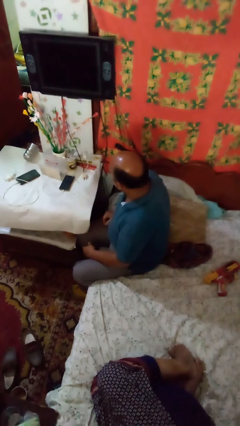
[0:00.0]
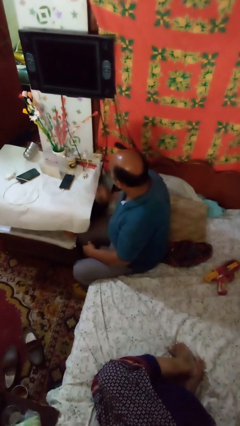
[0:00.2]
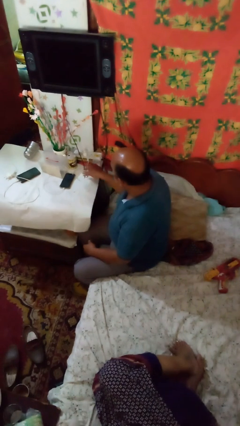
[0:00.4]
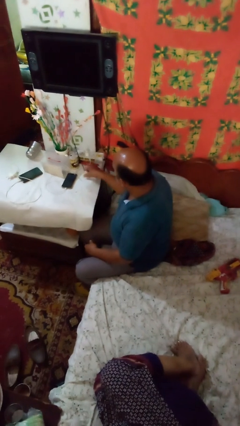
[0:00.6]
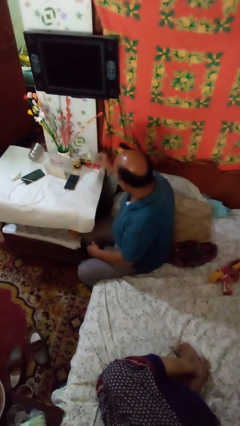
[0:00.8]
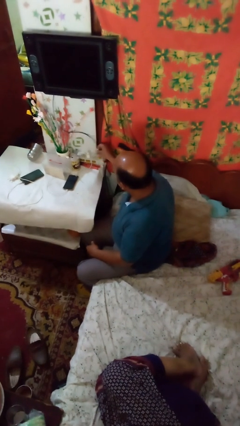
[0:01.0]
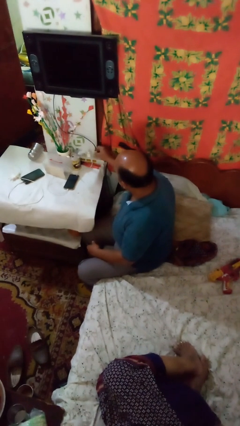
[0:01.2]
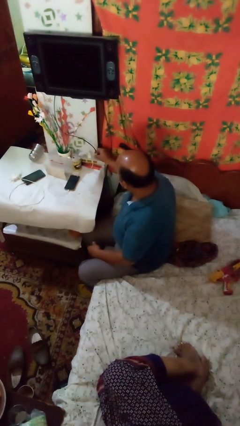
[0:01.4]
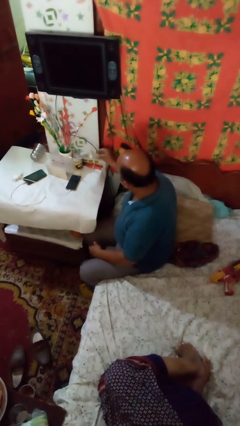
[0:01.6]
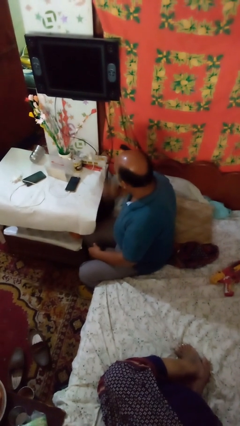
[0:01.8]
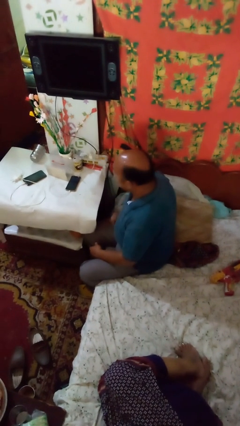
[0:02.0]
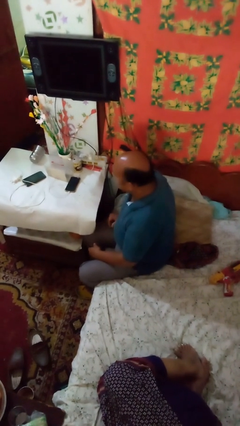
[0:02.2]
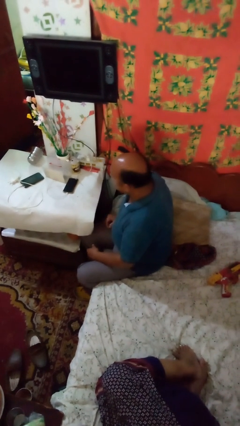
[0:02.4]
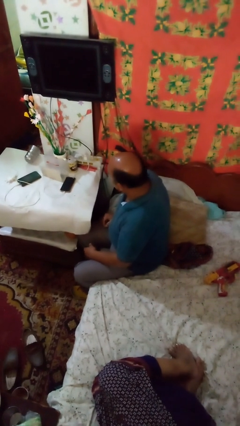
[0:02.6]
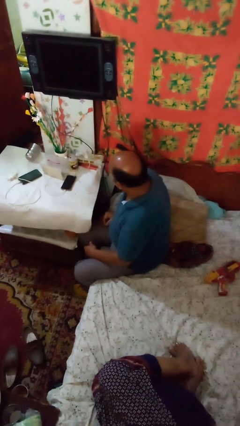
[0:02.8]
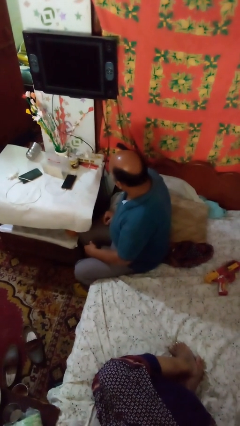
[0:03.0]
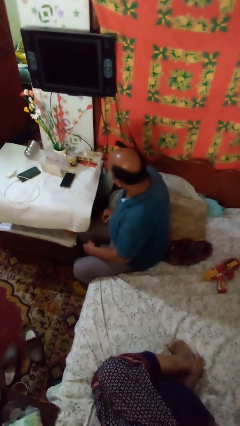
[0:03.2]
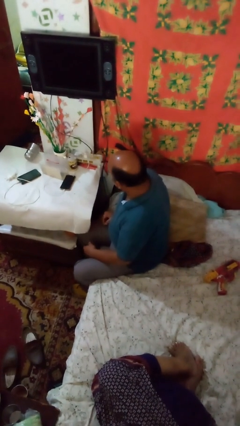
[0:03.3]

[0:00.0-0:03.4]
person plugs into electrical socket

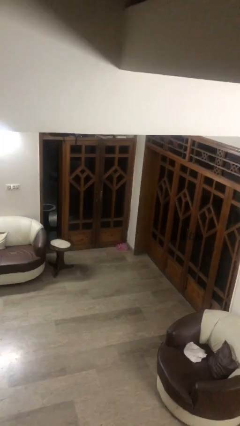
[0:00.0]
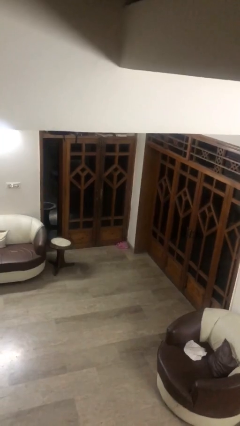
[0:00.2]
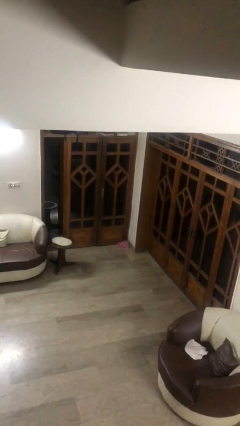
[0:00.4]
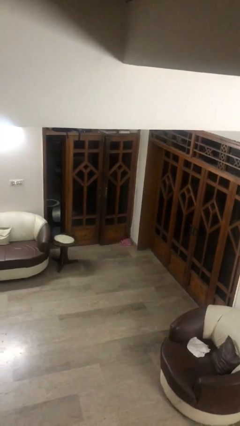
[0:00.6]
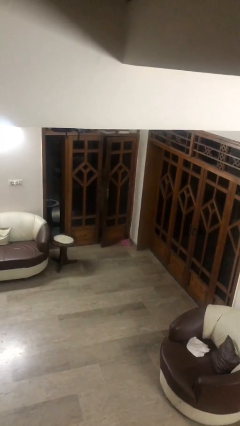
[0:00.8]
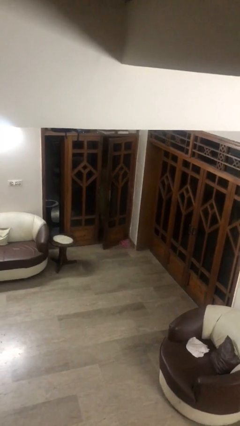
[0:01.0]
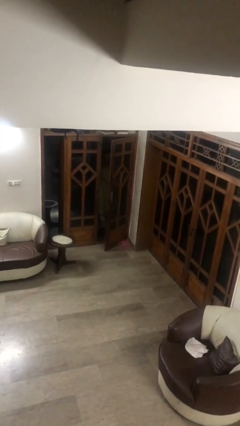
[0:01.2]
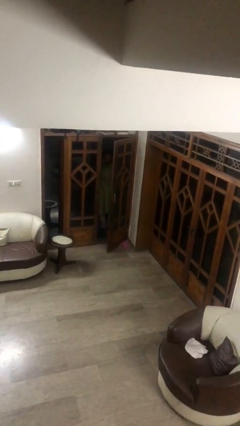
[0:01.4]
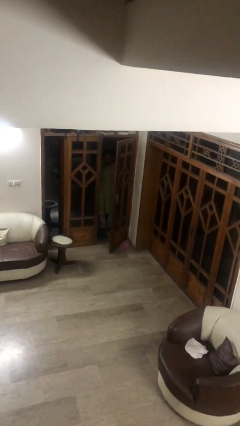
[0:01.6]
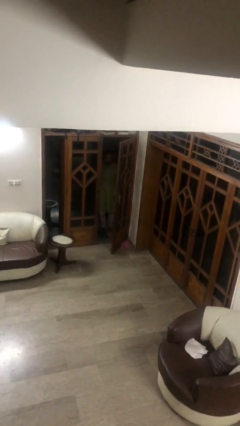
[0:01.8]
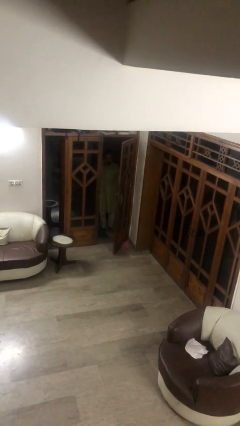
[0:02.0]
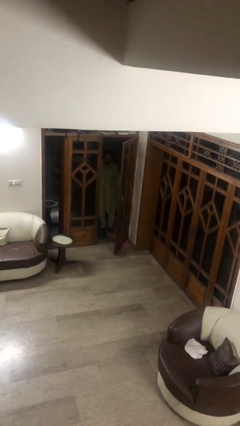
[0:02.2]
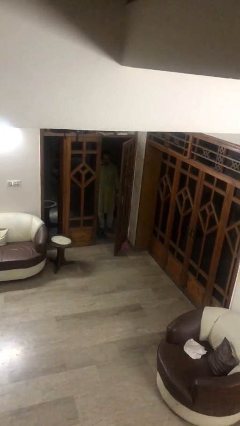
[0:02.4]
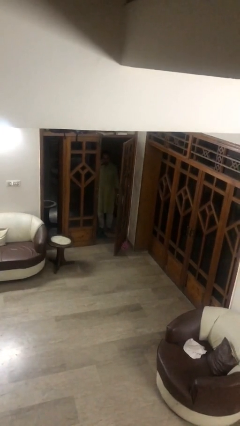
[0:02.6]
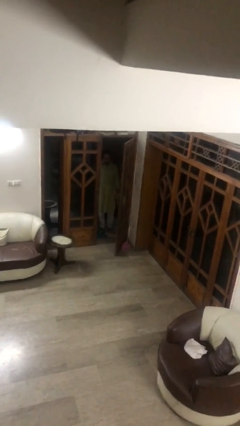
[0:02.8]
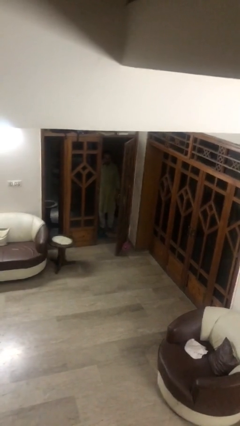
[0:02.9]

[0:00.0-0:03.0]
person opens facility door

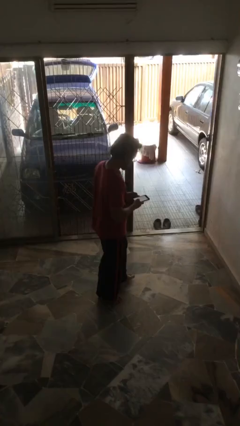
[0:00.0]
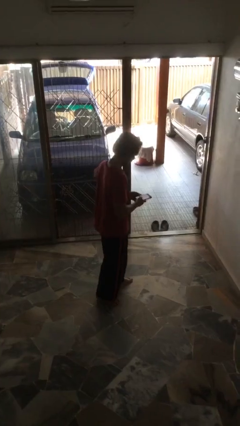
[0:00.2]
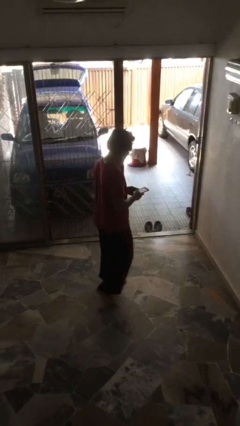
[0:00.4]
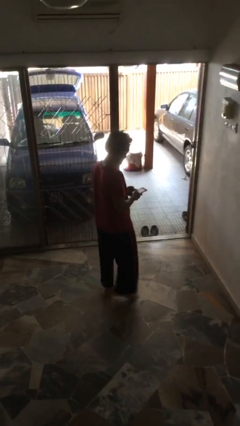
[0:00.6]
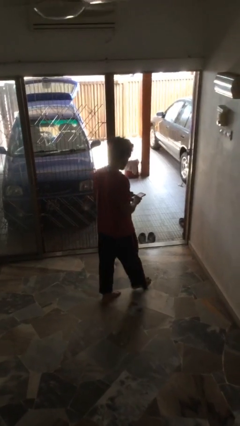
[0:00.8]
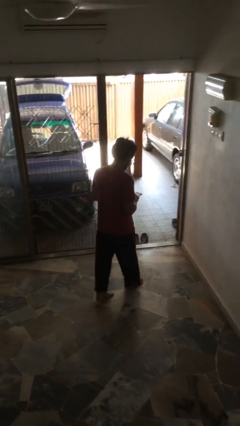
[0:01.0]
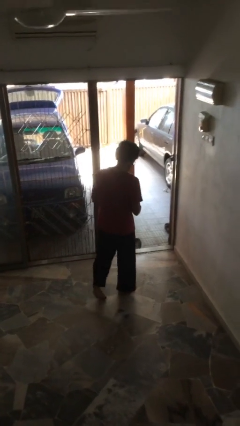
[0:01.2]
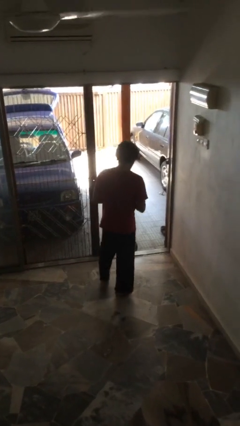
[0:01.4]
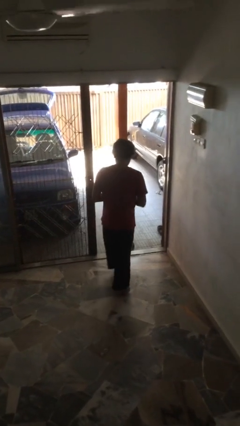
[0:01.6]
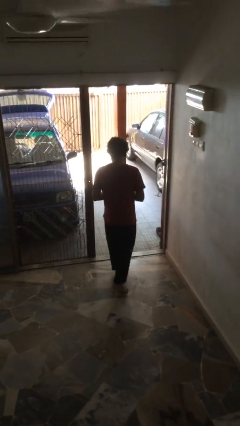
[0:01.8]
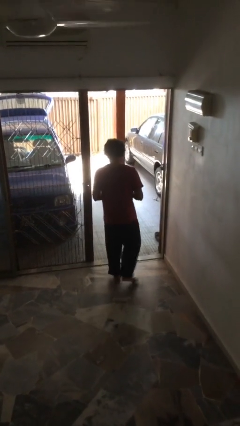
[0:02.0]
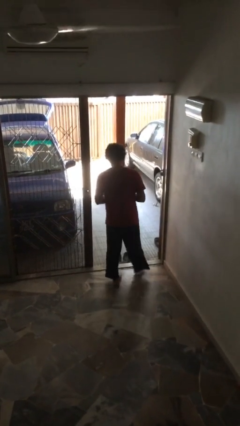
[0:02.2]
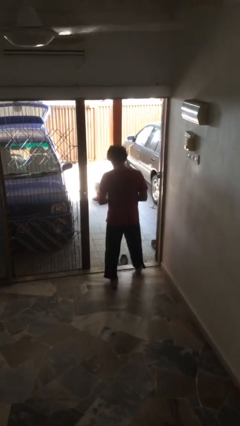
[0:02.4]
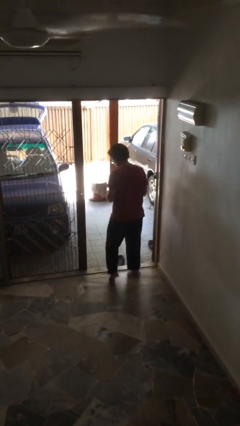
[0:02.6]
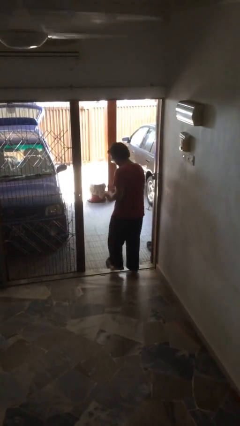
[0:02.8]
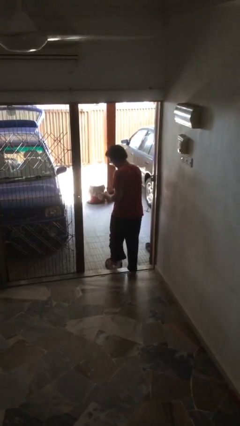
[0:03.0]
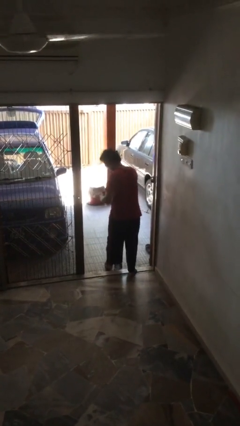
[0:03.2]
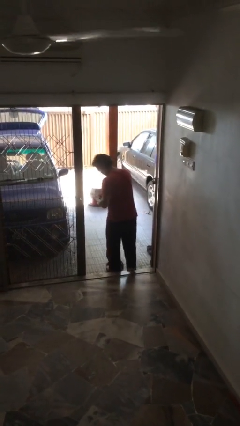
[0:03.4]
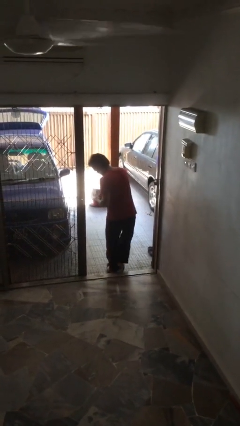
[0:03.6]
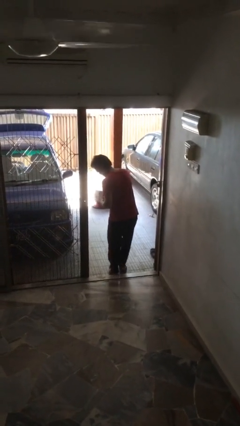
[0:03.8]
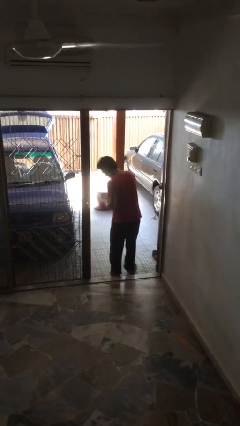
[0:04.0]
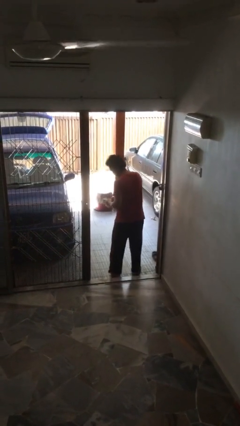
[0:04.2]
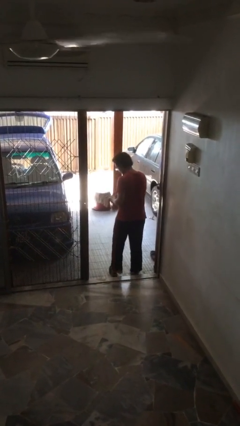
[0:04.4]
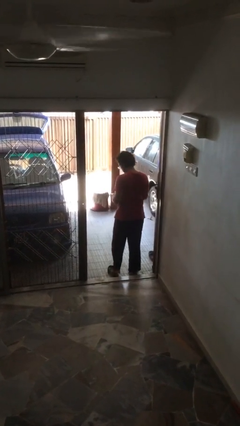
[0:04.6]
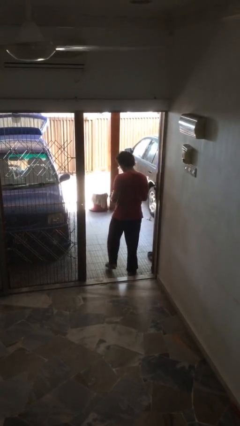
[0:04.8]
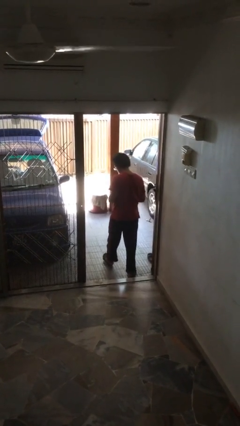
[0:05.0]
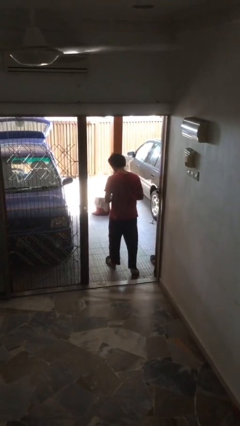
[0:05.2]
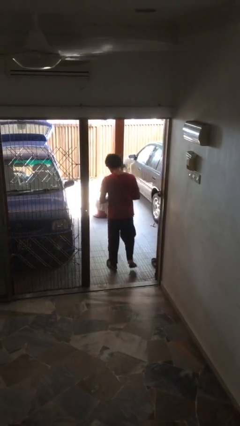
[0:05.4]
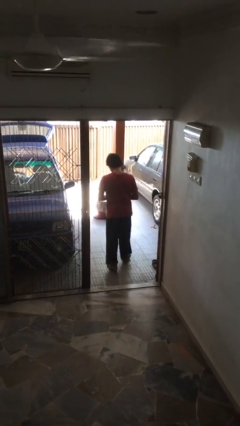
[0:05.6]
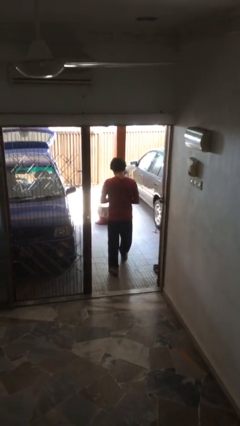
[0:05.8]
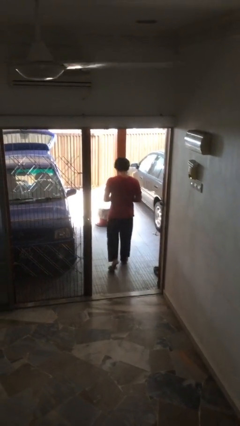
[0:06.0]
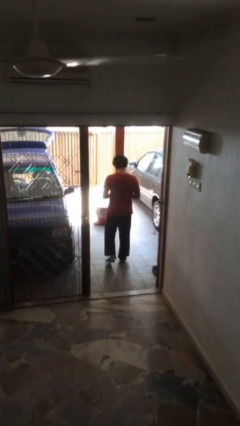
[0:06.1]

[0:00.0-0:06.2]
person exits scene through structure

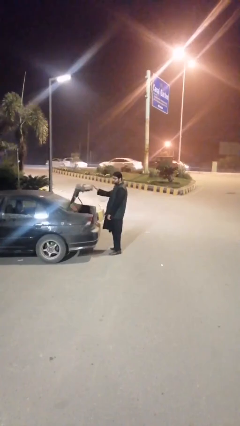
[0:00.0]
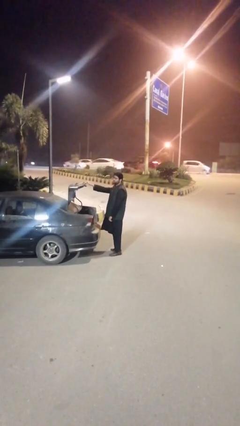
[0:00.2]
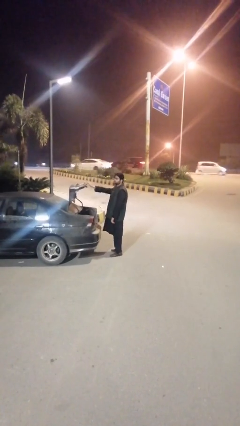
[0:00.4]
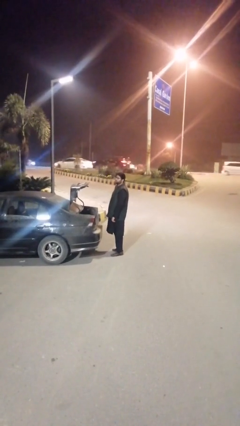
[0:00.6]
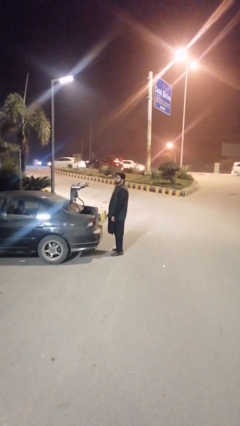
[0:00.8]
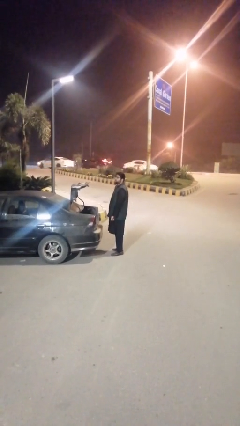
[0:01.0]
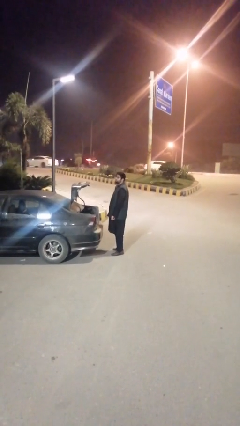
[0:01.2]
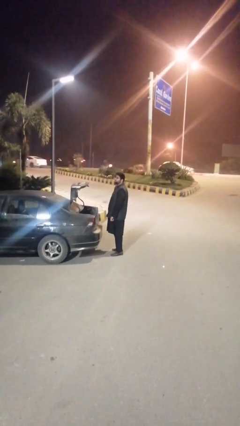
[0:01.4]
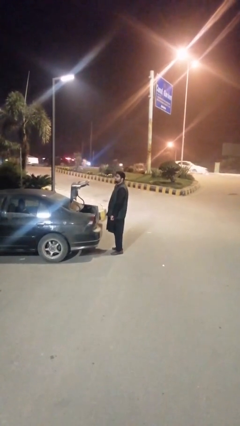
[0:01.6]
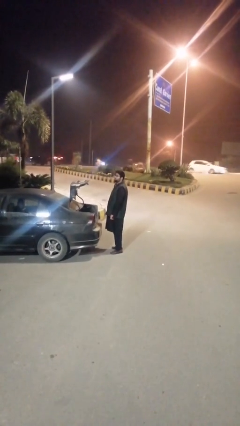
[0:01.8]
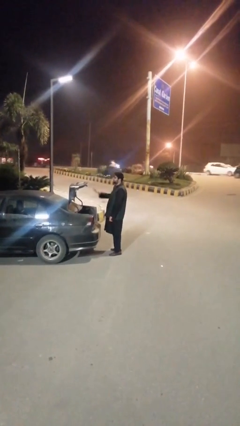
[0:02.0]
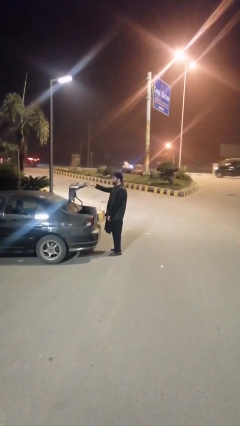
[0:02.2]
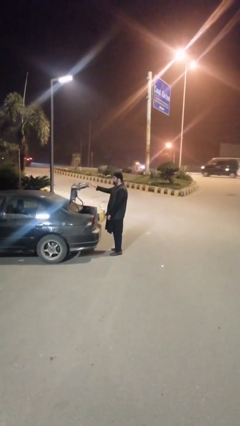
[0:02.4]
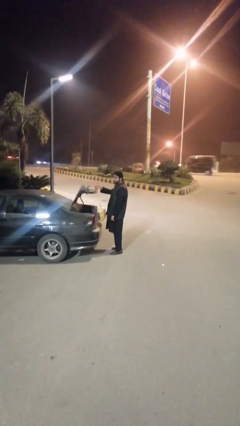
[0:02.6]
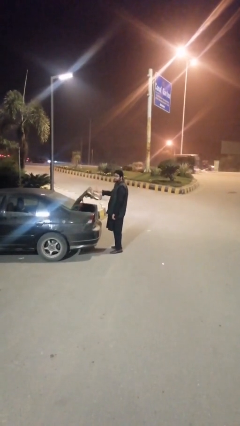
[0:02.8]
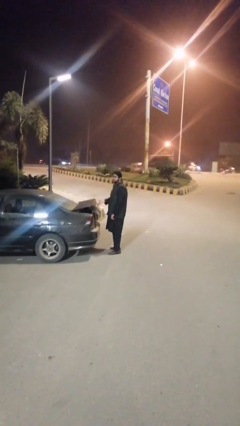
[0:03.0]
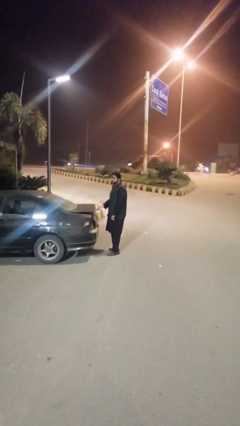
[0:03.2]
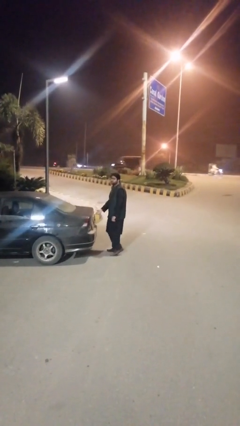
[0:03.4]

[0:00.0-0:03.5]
person opens car trunk

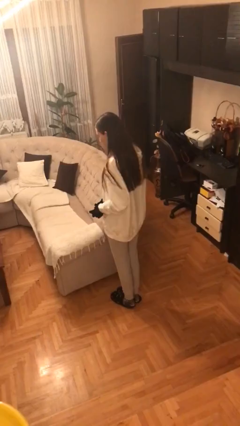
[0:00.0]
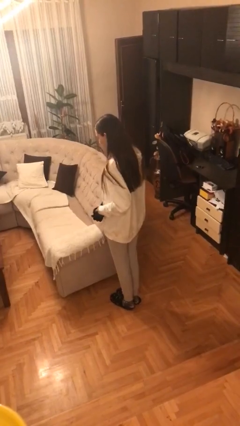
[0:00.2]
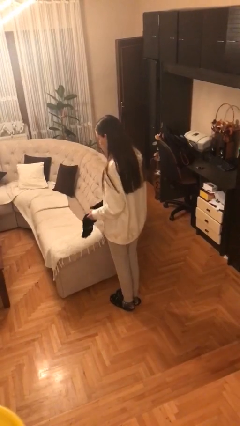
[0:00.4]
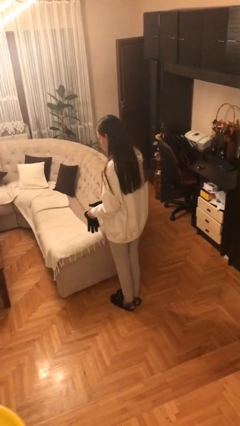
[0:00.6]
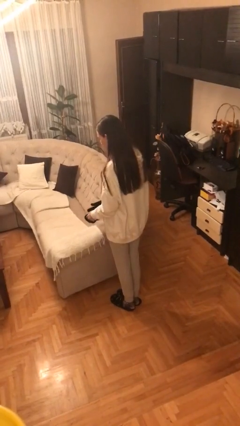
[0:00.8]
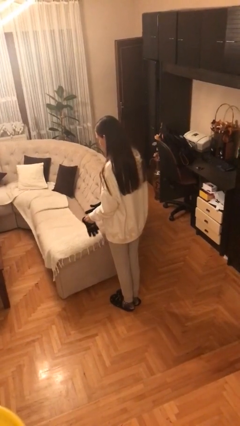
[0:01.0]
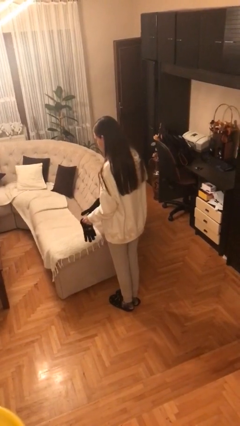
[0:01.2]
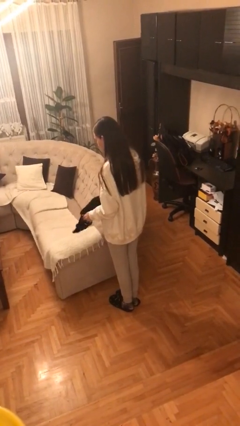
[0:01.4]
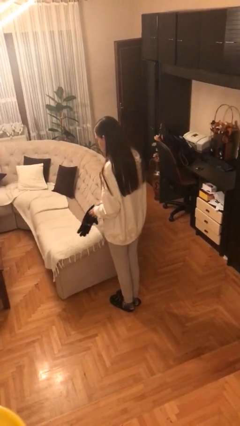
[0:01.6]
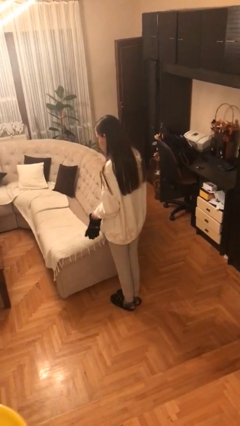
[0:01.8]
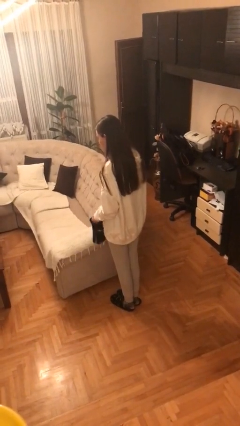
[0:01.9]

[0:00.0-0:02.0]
person takes off gloves
